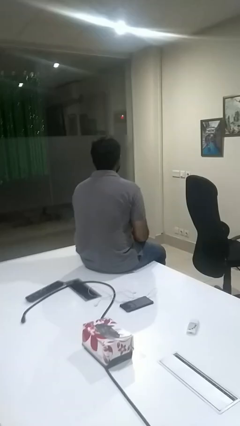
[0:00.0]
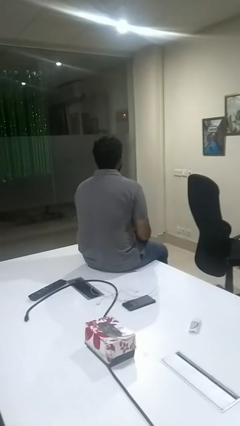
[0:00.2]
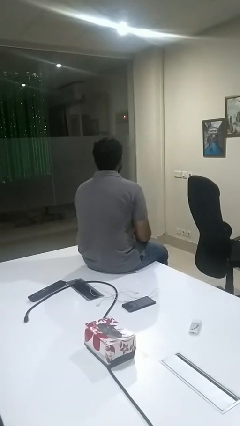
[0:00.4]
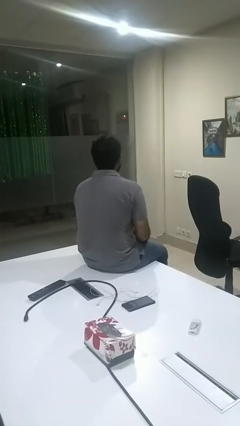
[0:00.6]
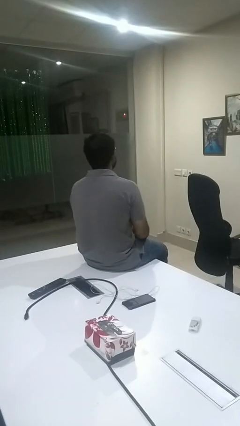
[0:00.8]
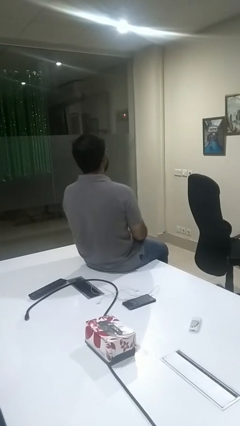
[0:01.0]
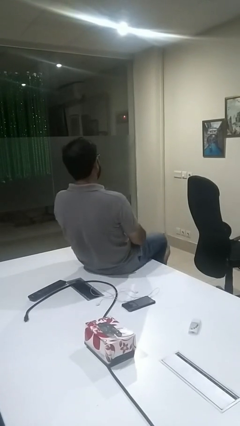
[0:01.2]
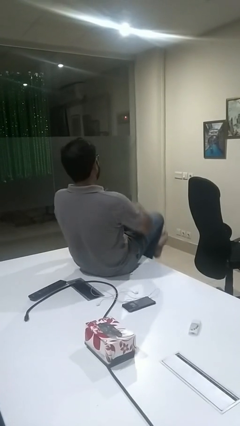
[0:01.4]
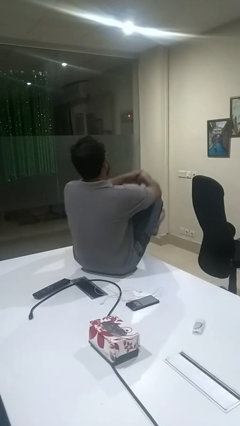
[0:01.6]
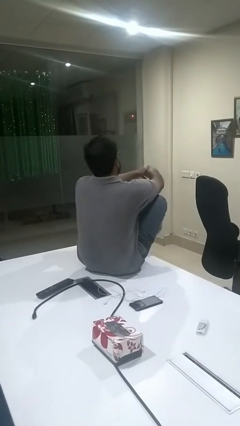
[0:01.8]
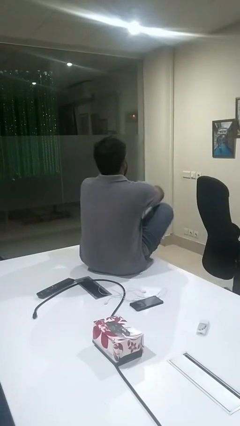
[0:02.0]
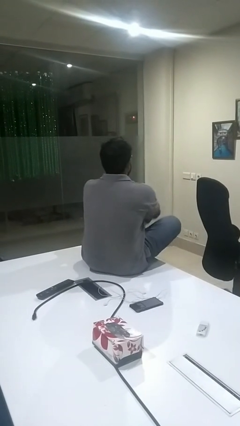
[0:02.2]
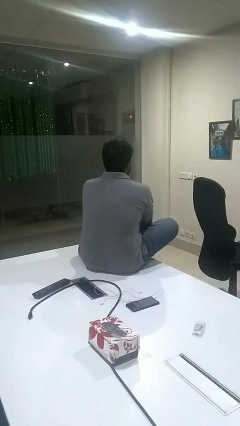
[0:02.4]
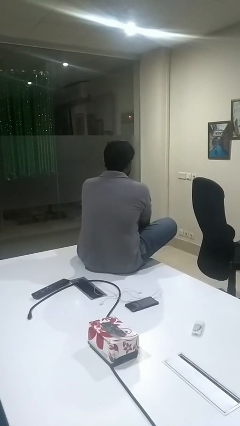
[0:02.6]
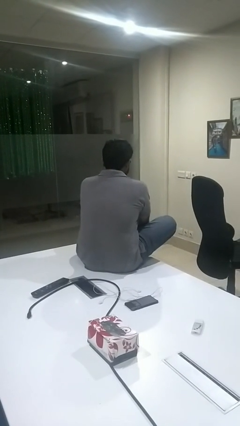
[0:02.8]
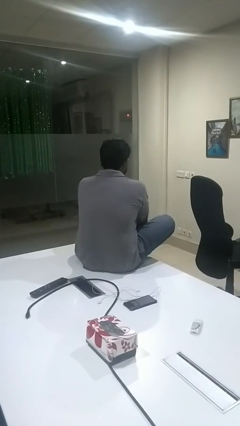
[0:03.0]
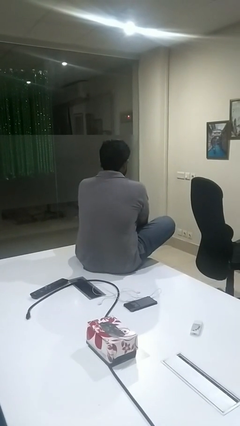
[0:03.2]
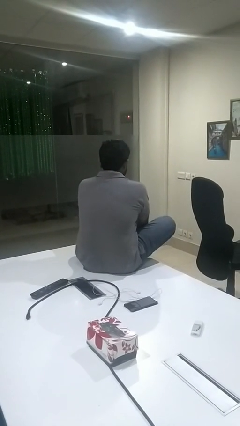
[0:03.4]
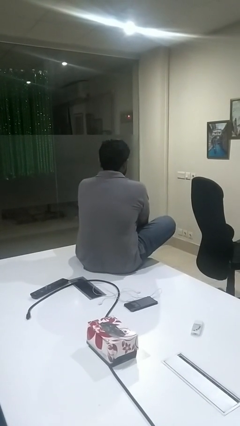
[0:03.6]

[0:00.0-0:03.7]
person puts feet up

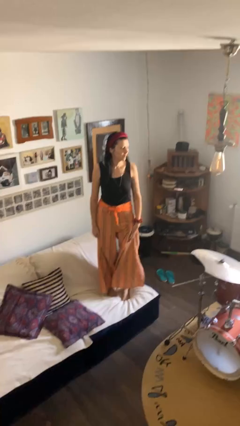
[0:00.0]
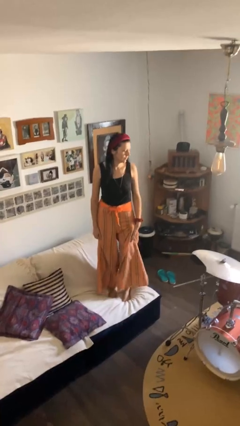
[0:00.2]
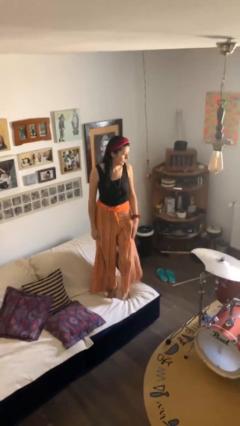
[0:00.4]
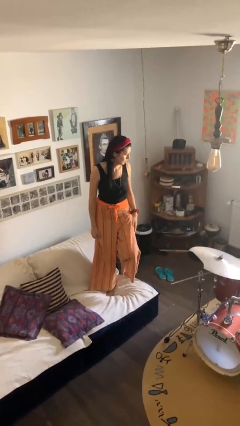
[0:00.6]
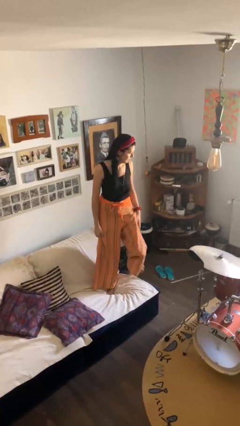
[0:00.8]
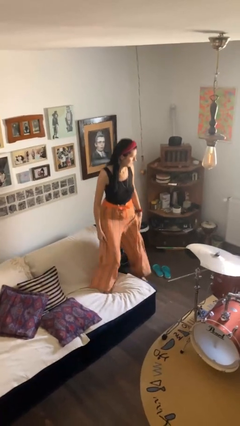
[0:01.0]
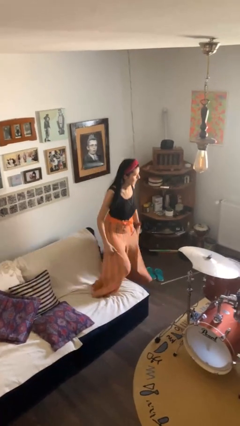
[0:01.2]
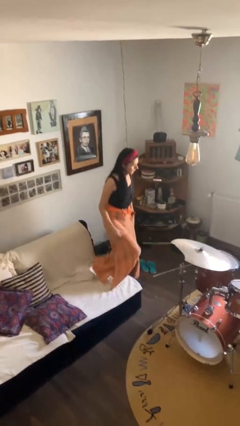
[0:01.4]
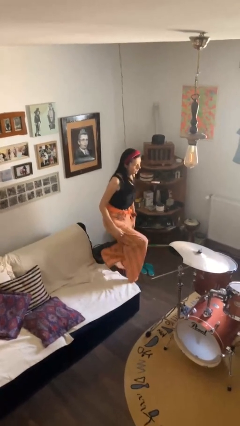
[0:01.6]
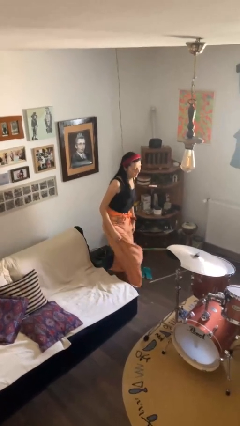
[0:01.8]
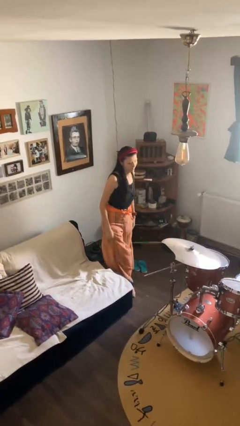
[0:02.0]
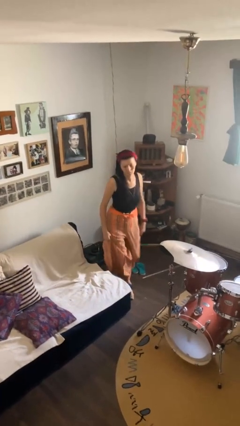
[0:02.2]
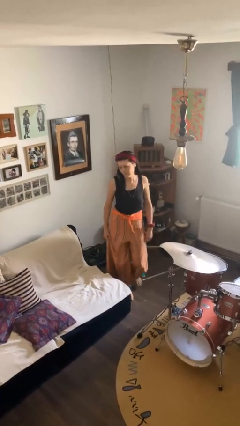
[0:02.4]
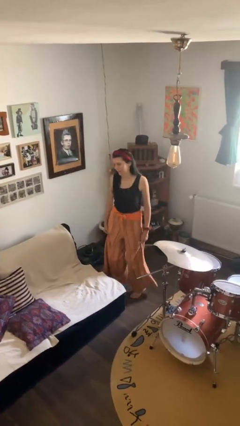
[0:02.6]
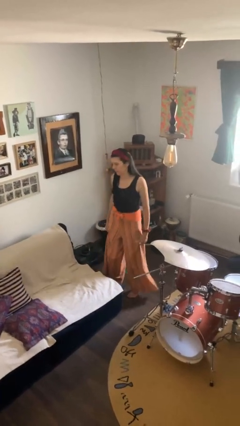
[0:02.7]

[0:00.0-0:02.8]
person climbs off couch

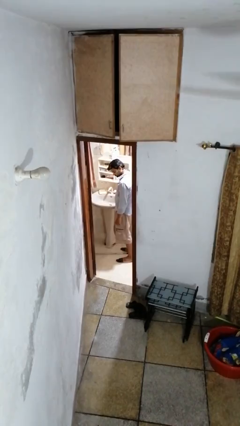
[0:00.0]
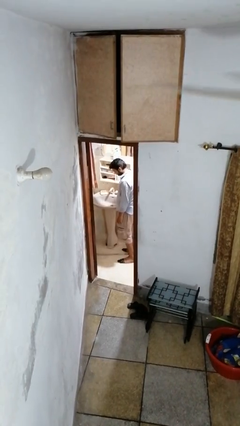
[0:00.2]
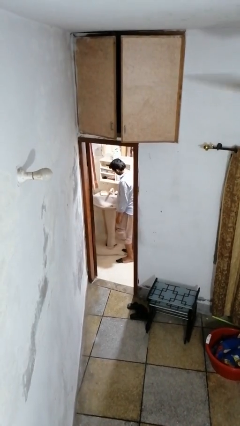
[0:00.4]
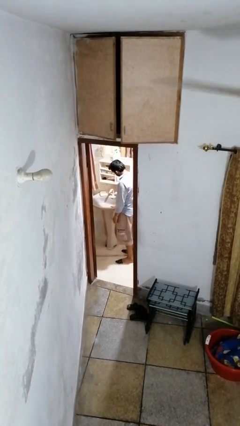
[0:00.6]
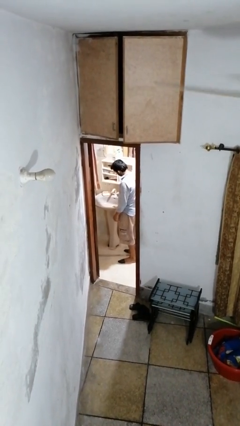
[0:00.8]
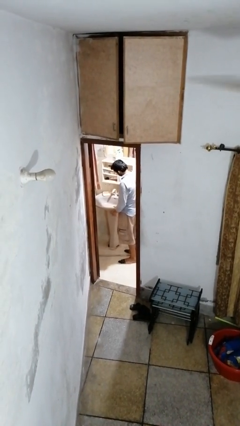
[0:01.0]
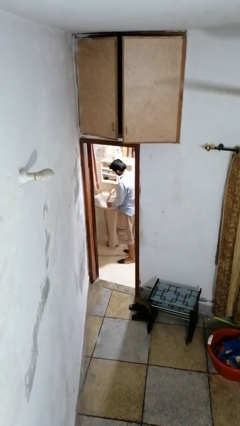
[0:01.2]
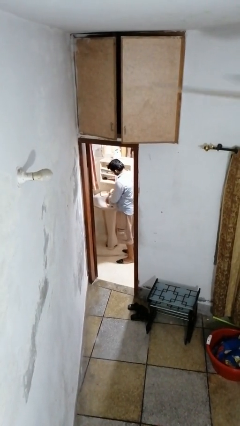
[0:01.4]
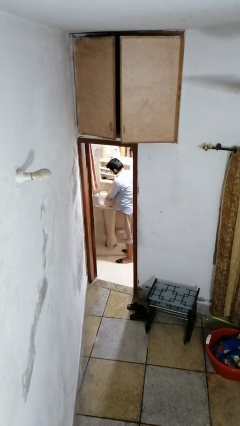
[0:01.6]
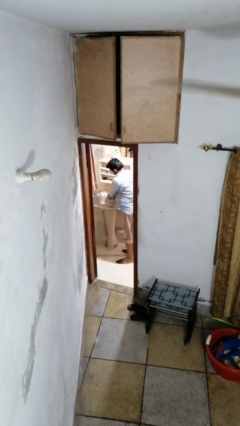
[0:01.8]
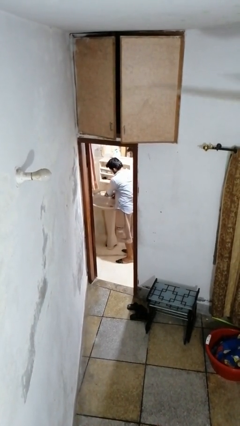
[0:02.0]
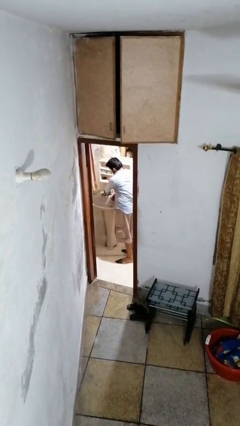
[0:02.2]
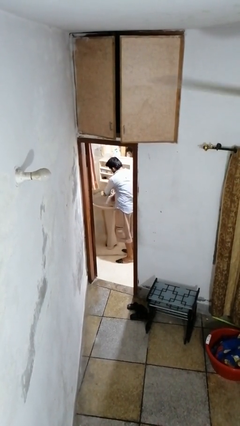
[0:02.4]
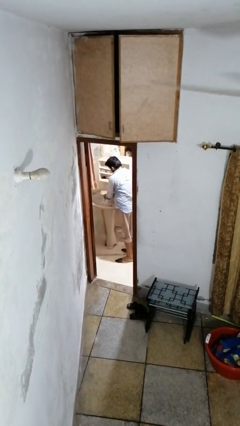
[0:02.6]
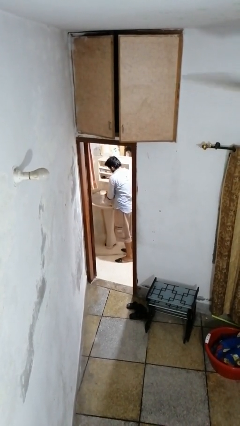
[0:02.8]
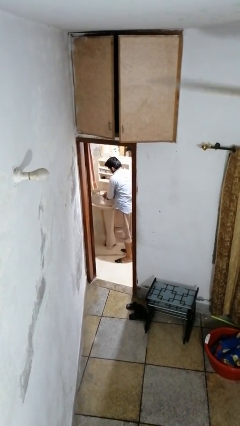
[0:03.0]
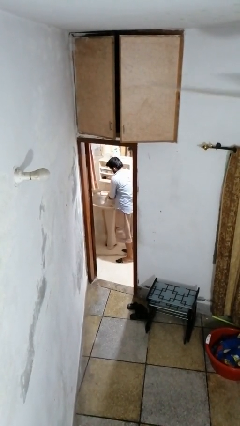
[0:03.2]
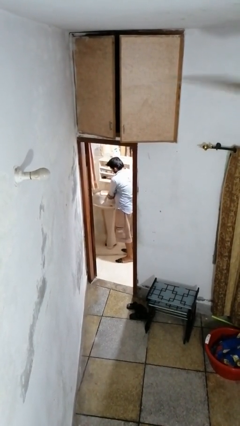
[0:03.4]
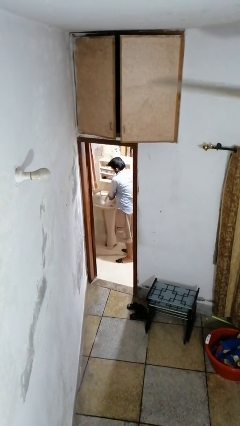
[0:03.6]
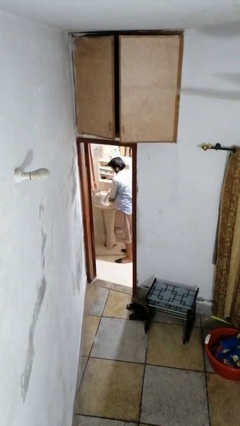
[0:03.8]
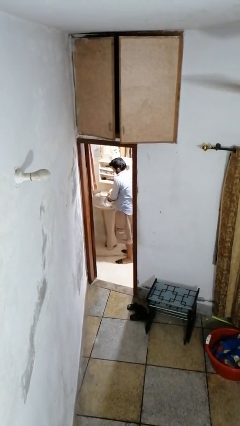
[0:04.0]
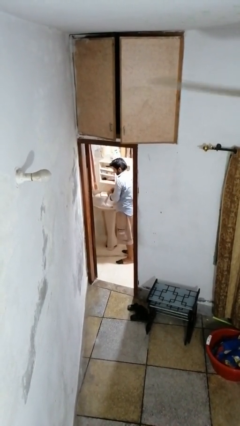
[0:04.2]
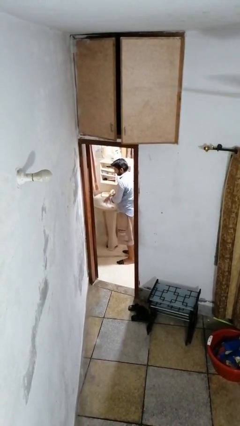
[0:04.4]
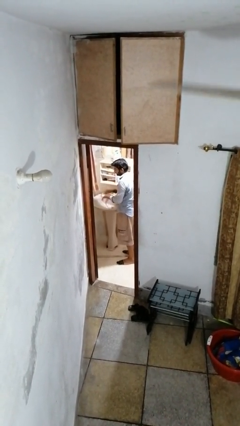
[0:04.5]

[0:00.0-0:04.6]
person washes hands

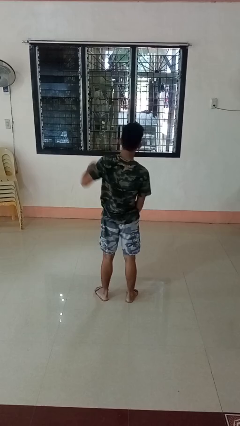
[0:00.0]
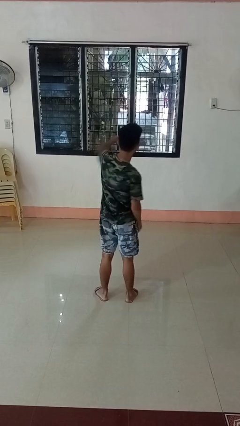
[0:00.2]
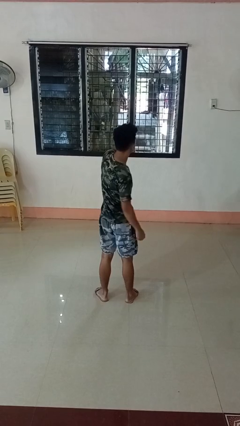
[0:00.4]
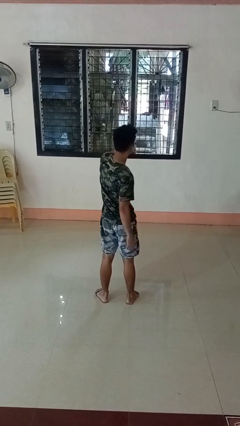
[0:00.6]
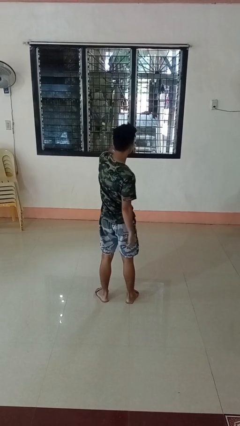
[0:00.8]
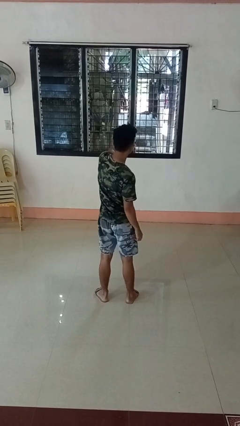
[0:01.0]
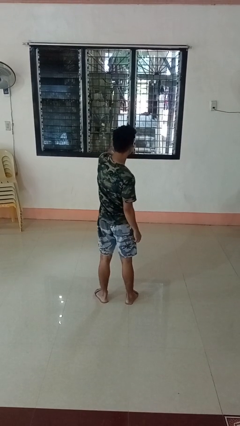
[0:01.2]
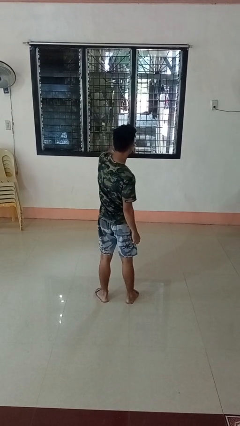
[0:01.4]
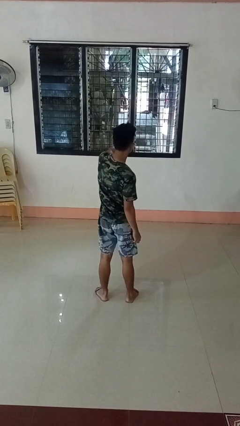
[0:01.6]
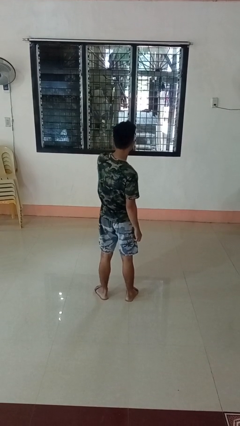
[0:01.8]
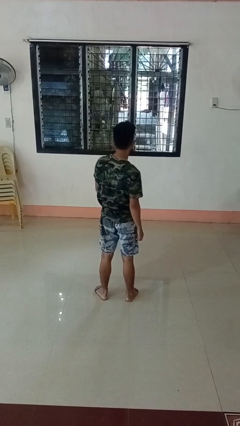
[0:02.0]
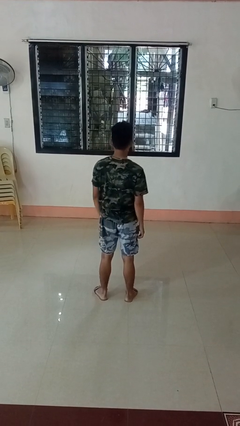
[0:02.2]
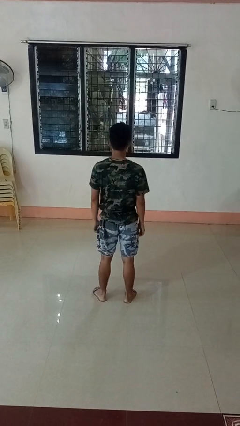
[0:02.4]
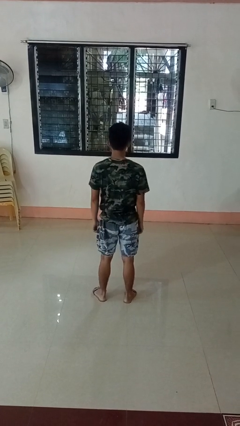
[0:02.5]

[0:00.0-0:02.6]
person punches

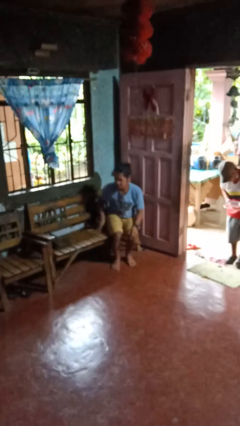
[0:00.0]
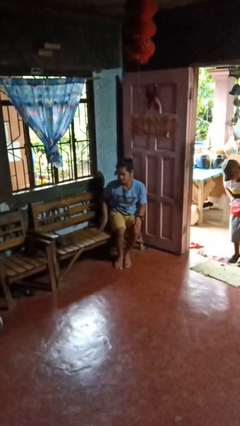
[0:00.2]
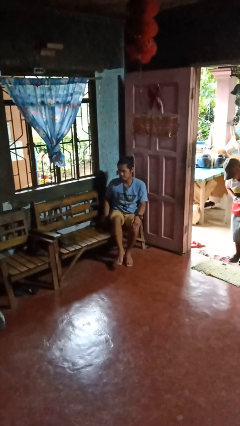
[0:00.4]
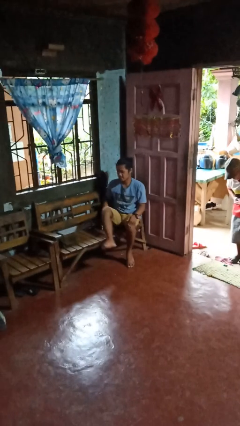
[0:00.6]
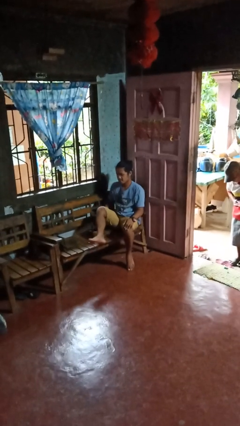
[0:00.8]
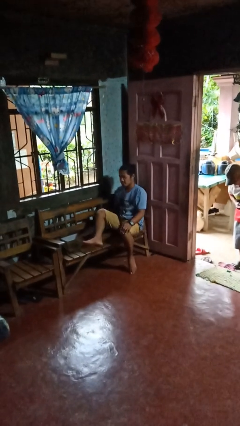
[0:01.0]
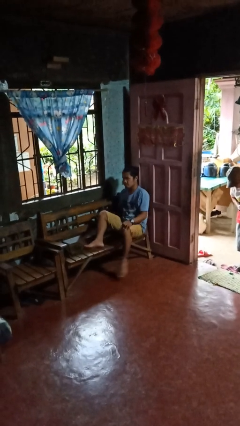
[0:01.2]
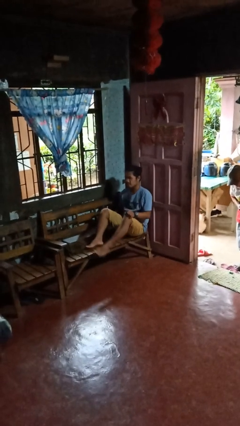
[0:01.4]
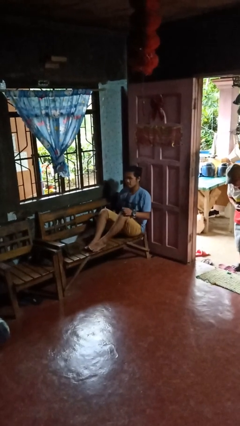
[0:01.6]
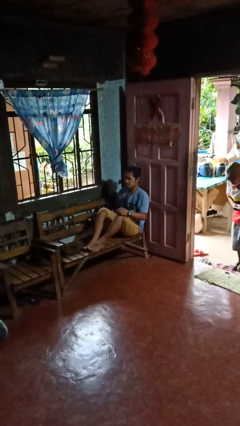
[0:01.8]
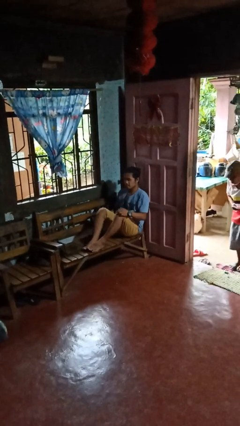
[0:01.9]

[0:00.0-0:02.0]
person sits down

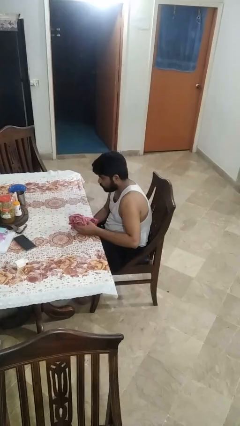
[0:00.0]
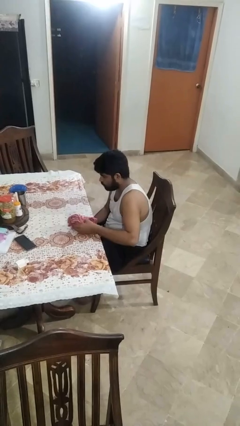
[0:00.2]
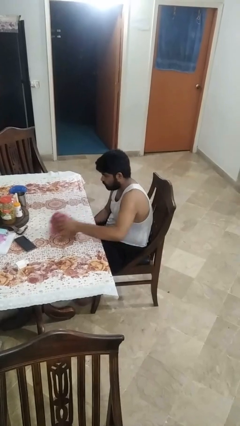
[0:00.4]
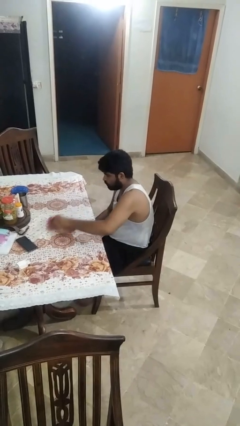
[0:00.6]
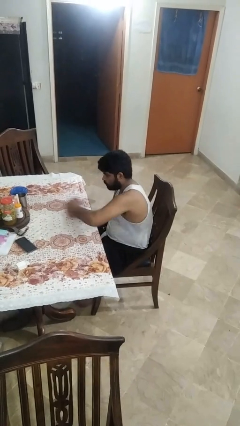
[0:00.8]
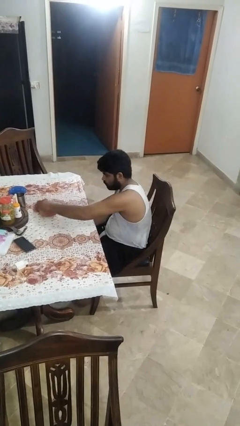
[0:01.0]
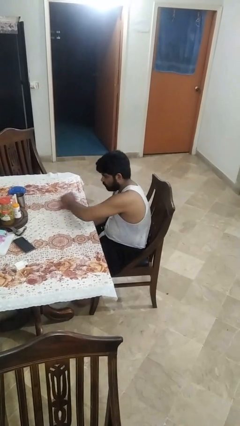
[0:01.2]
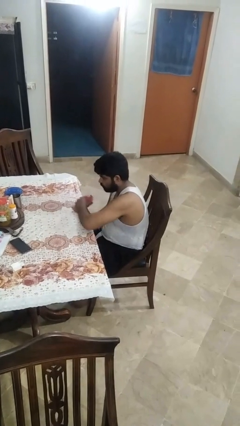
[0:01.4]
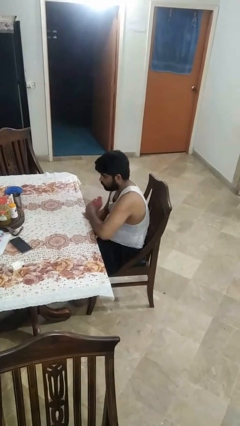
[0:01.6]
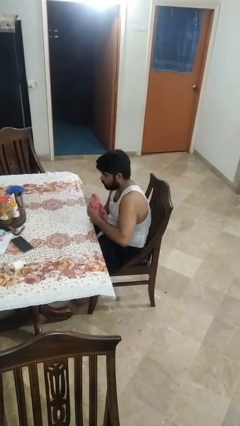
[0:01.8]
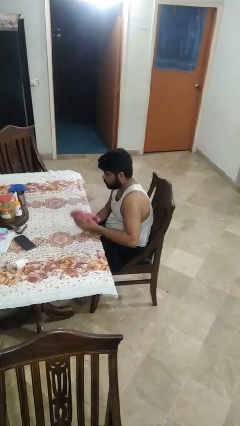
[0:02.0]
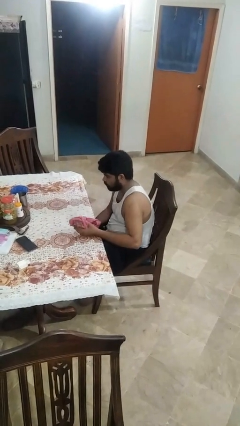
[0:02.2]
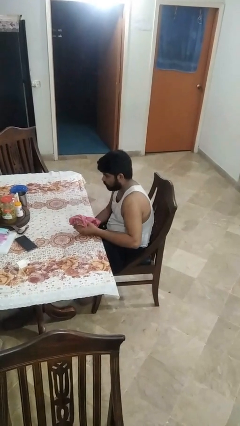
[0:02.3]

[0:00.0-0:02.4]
person cleans table with rag
